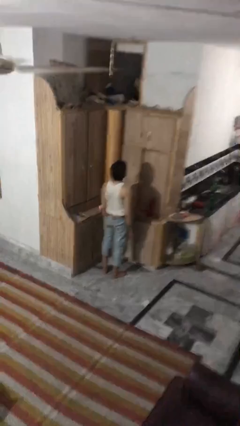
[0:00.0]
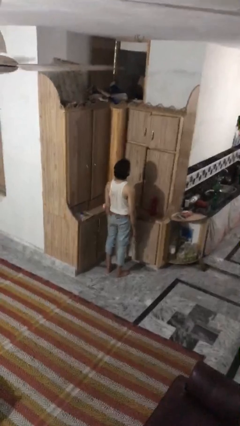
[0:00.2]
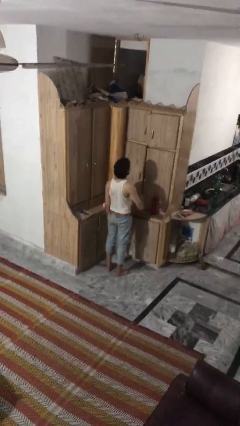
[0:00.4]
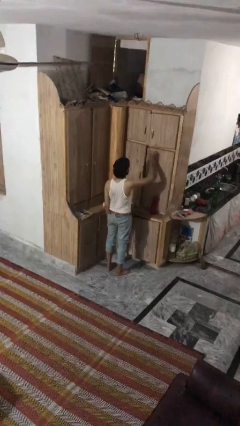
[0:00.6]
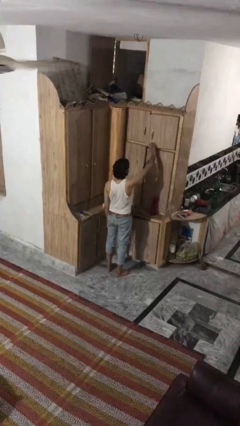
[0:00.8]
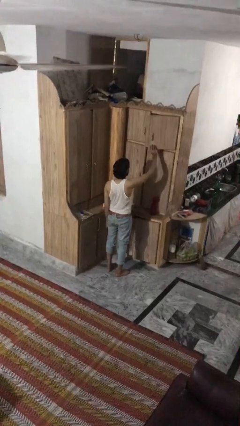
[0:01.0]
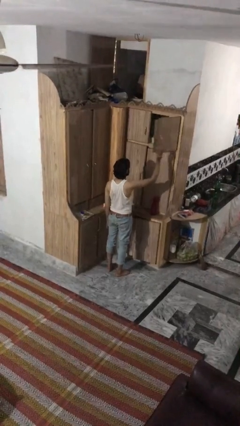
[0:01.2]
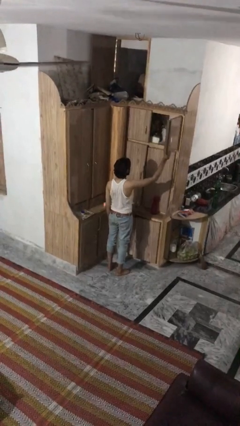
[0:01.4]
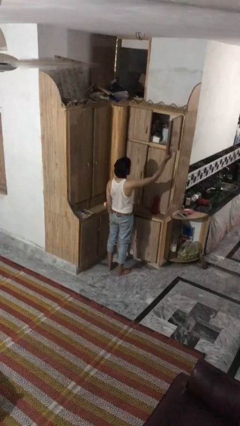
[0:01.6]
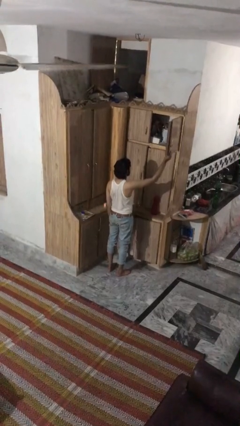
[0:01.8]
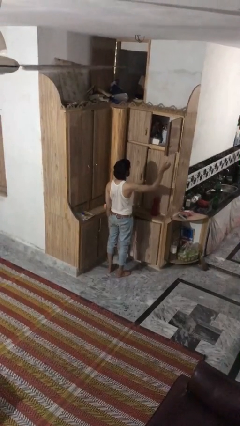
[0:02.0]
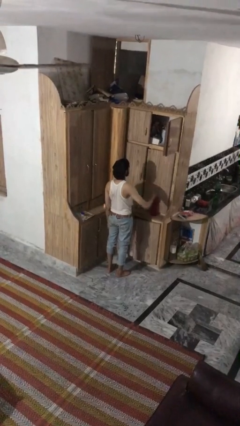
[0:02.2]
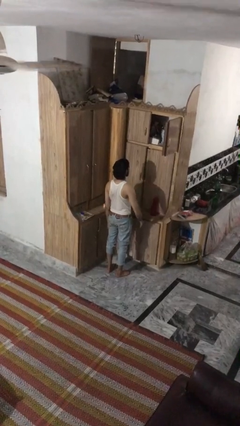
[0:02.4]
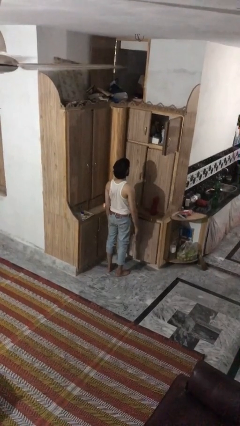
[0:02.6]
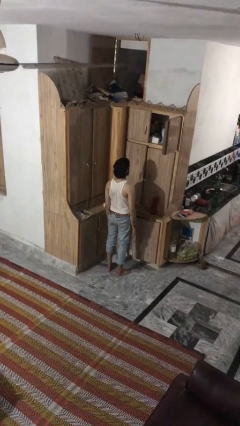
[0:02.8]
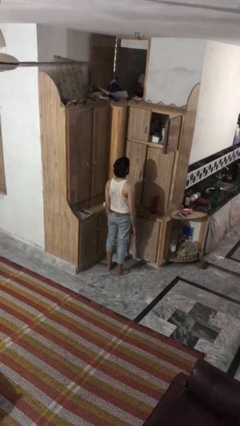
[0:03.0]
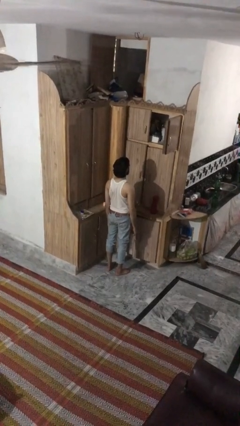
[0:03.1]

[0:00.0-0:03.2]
person opens cabinet

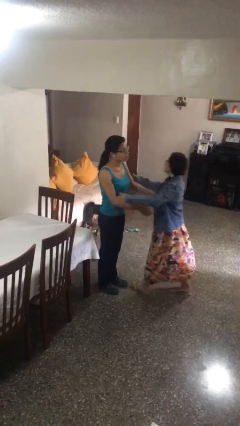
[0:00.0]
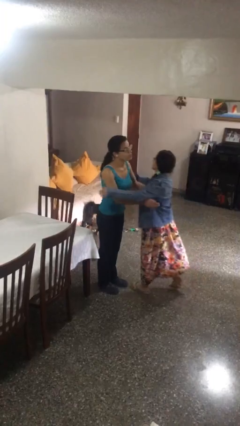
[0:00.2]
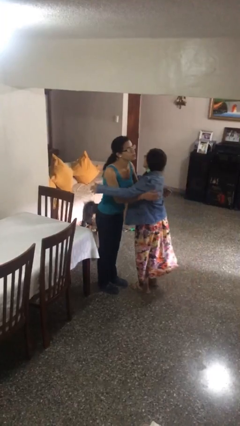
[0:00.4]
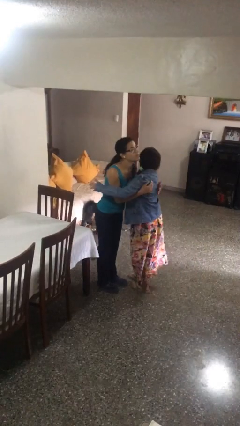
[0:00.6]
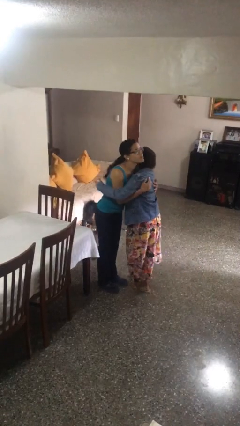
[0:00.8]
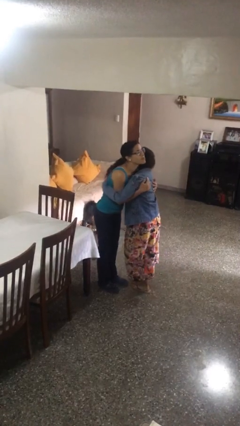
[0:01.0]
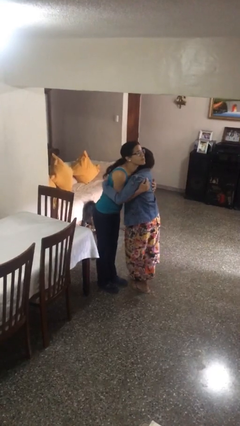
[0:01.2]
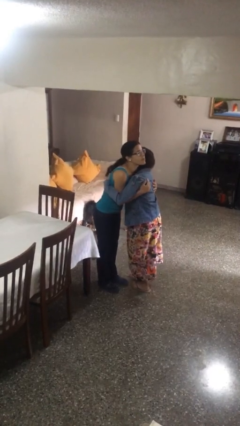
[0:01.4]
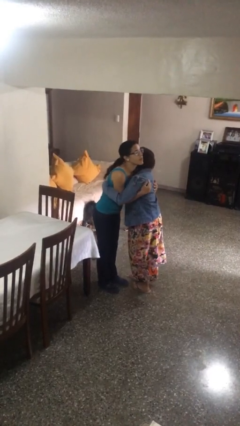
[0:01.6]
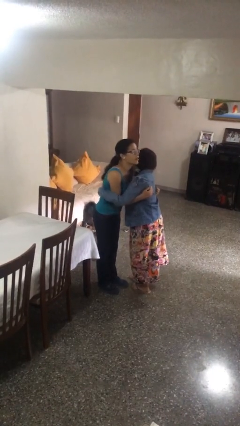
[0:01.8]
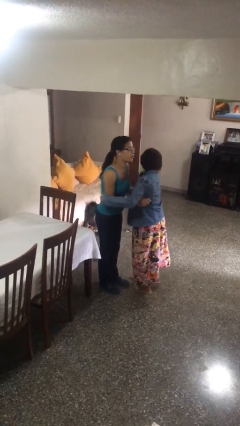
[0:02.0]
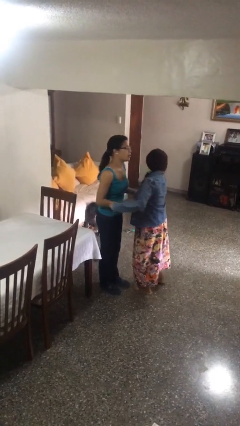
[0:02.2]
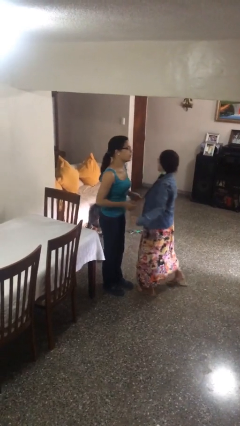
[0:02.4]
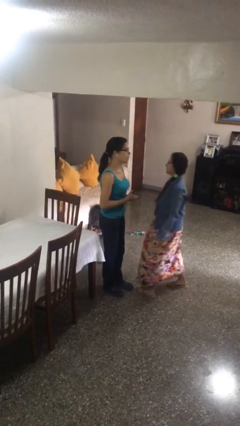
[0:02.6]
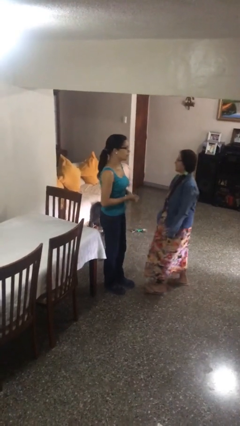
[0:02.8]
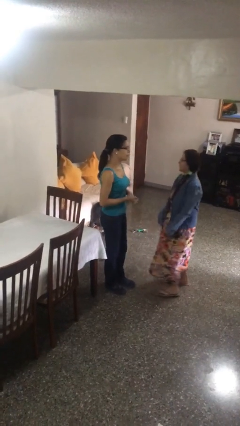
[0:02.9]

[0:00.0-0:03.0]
person embraces person

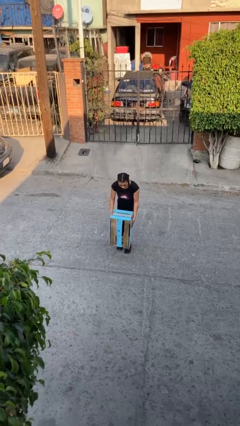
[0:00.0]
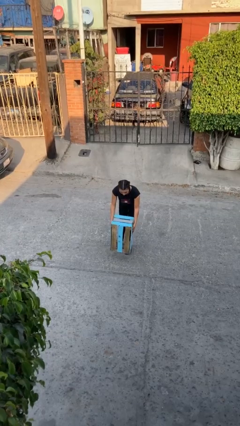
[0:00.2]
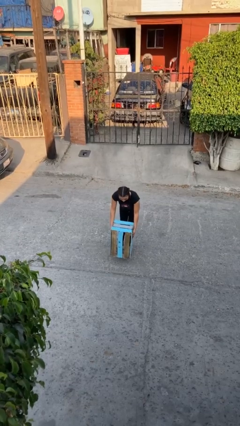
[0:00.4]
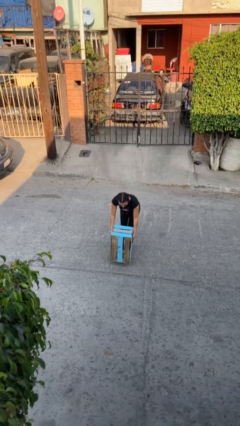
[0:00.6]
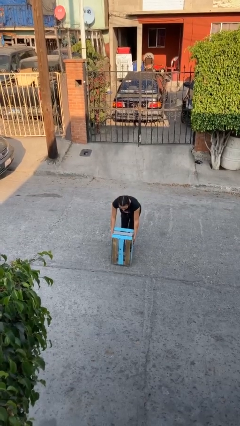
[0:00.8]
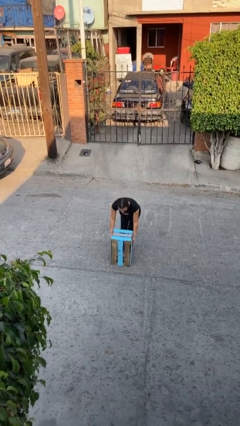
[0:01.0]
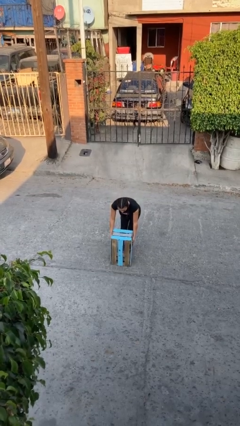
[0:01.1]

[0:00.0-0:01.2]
person puts down object on floor

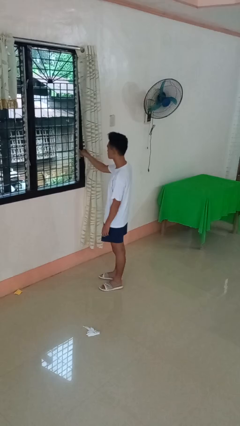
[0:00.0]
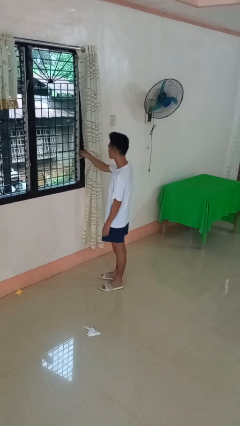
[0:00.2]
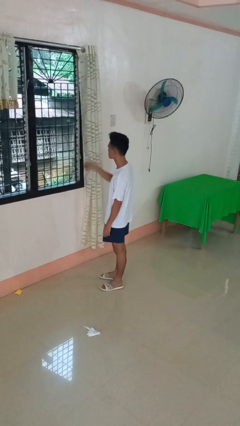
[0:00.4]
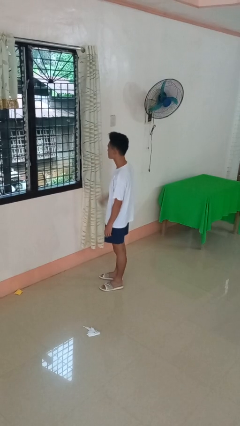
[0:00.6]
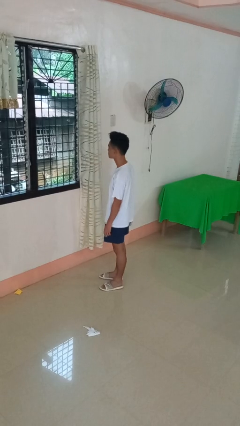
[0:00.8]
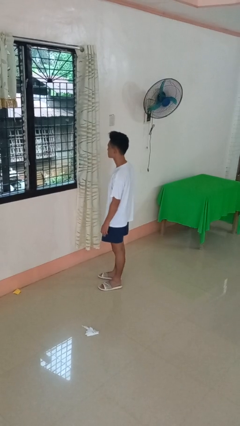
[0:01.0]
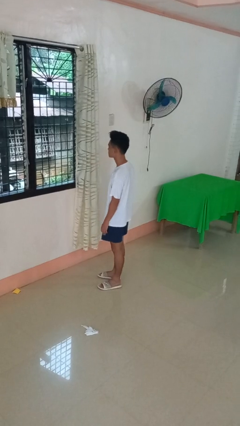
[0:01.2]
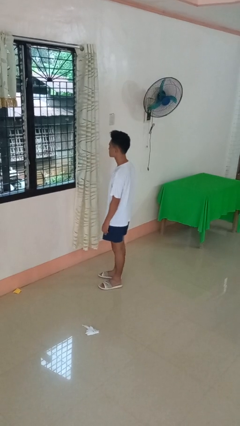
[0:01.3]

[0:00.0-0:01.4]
person closes home window

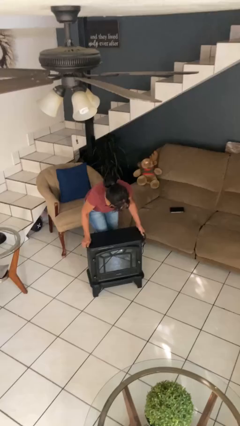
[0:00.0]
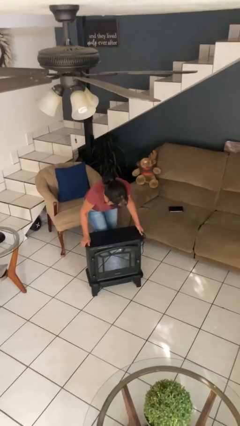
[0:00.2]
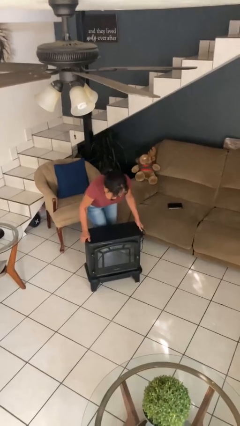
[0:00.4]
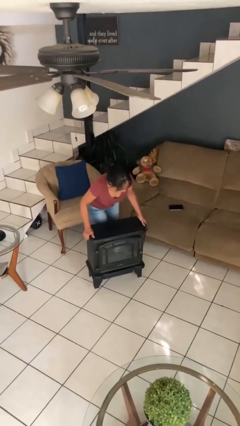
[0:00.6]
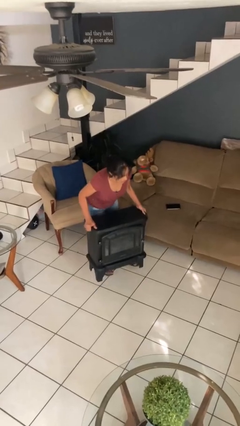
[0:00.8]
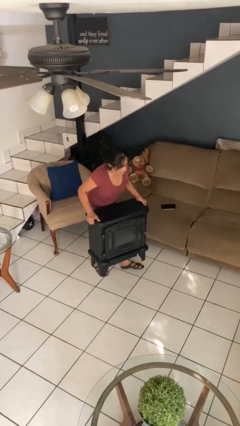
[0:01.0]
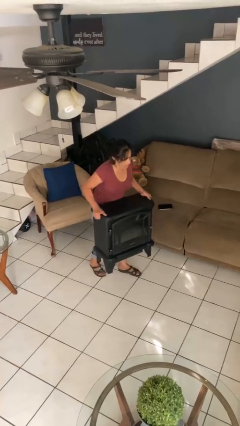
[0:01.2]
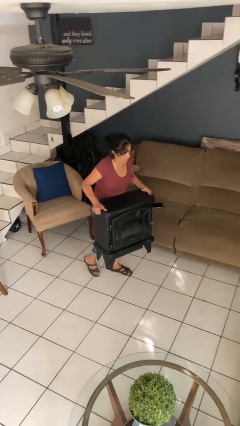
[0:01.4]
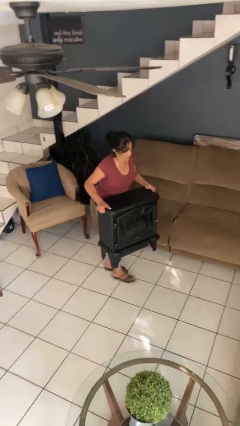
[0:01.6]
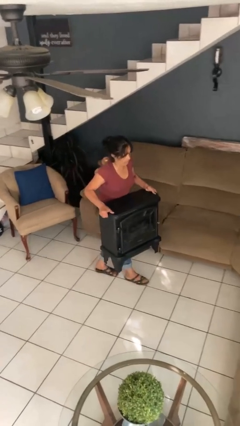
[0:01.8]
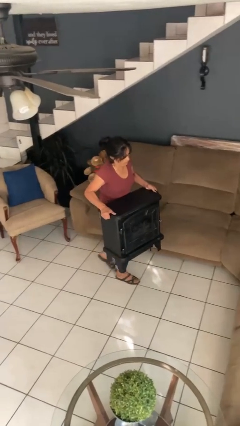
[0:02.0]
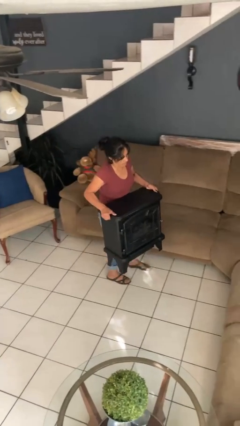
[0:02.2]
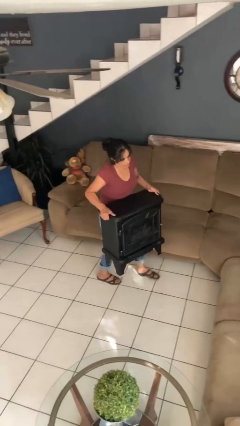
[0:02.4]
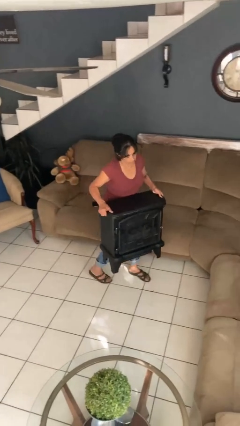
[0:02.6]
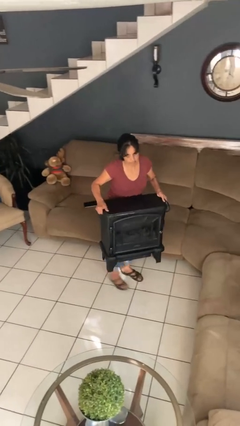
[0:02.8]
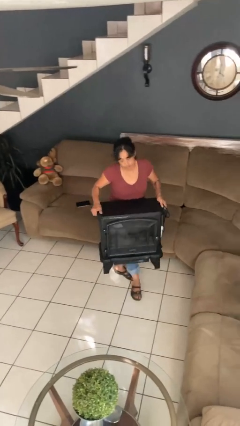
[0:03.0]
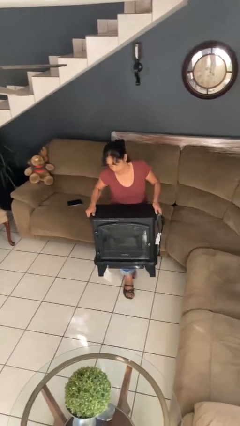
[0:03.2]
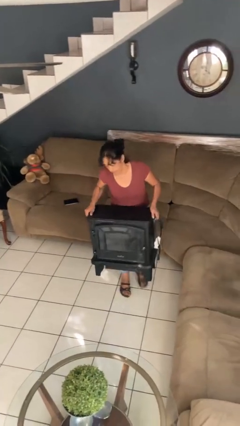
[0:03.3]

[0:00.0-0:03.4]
person carries furniture

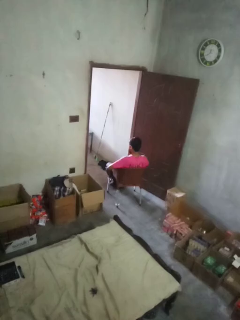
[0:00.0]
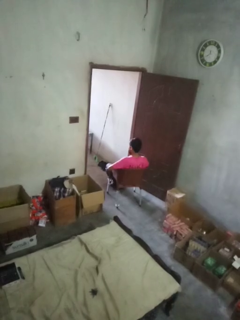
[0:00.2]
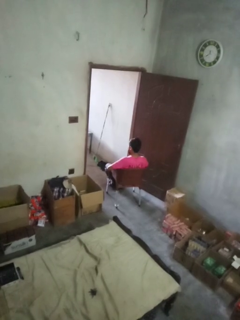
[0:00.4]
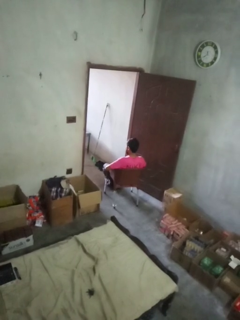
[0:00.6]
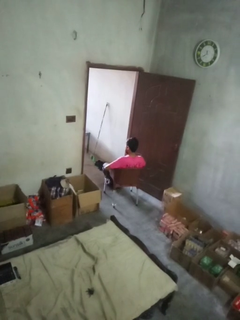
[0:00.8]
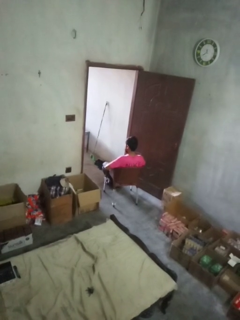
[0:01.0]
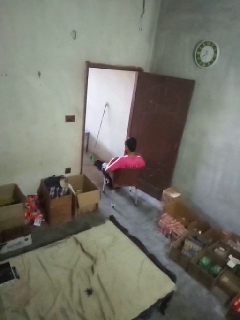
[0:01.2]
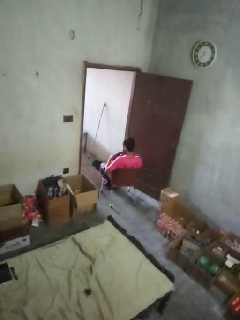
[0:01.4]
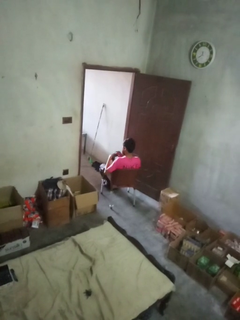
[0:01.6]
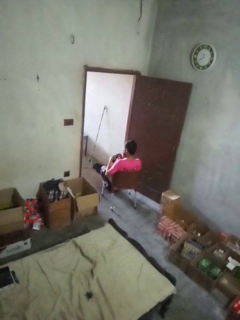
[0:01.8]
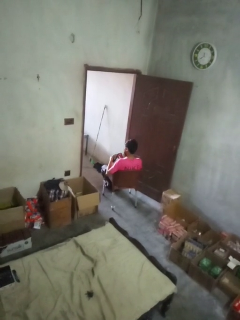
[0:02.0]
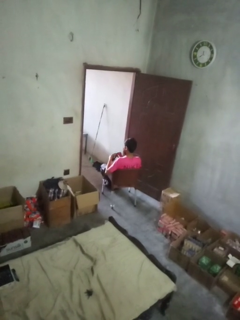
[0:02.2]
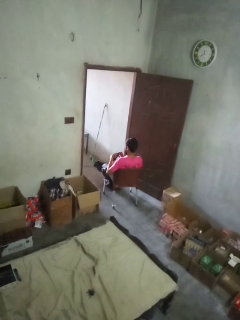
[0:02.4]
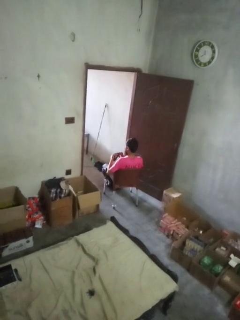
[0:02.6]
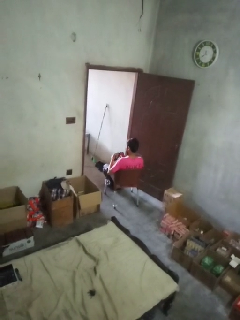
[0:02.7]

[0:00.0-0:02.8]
person searches in purse

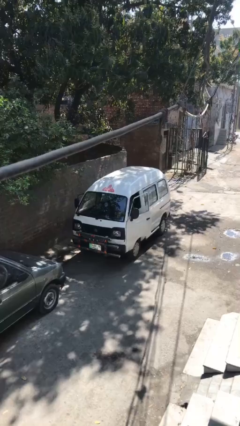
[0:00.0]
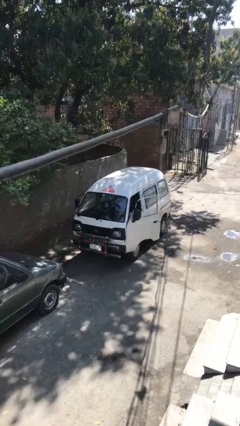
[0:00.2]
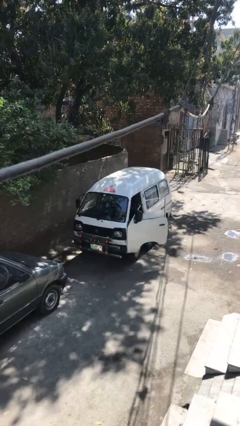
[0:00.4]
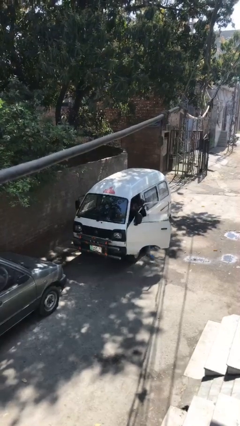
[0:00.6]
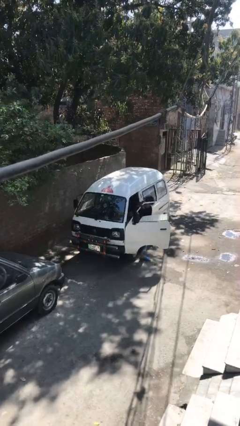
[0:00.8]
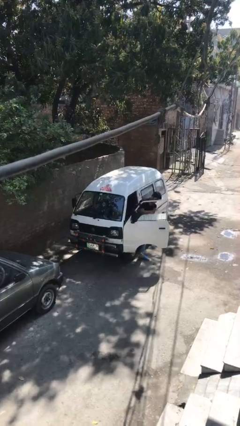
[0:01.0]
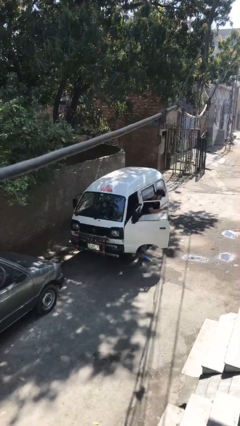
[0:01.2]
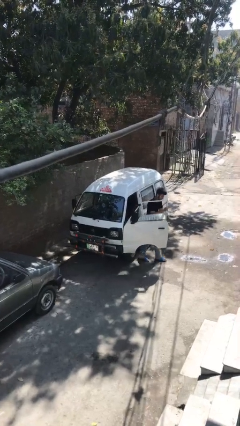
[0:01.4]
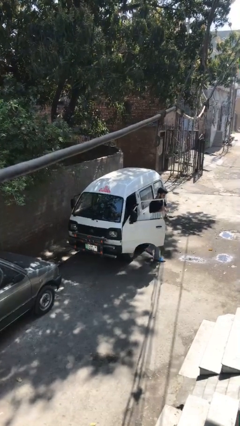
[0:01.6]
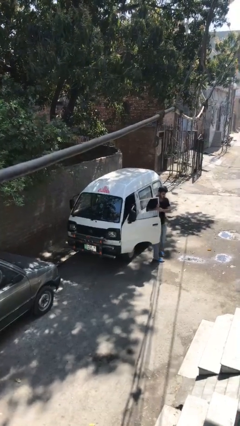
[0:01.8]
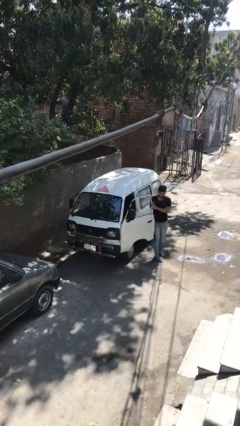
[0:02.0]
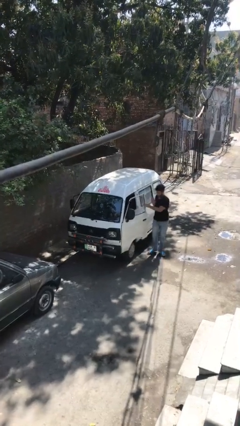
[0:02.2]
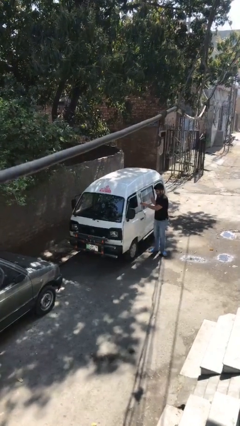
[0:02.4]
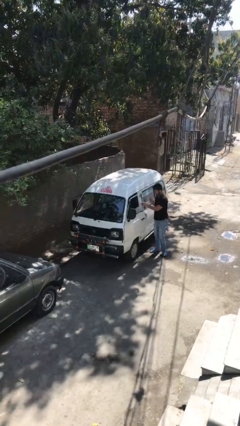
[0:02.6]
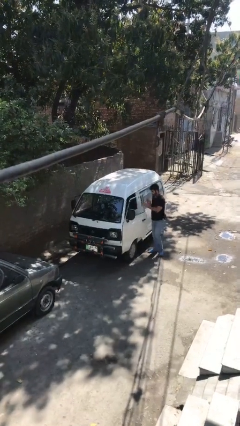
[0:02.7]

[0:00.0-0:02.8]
car drops off person
